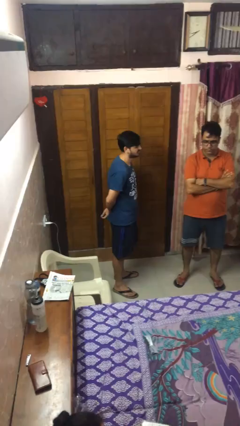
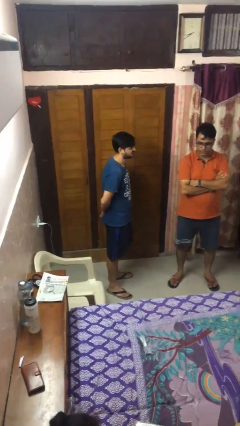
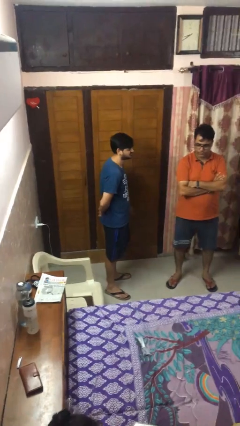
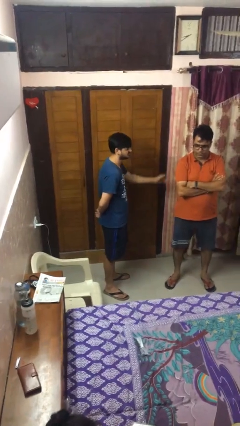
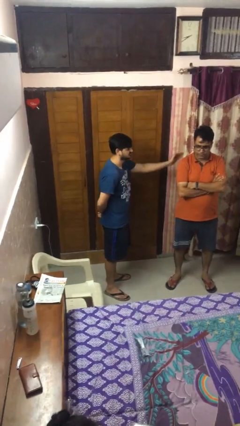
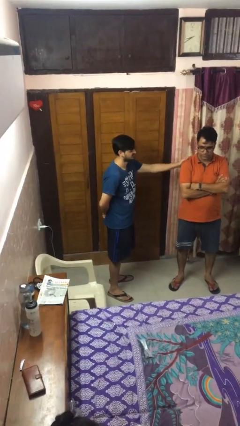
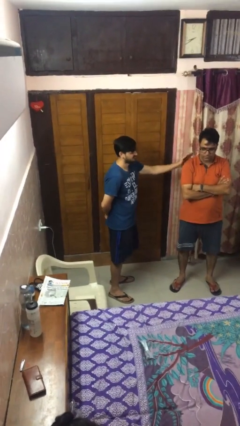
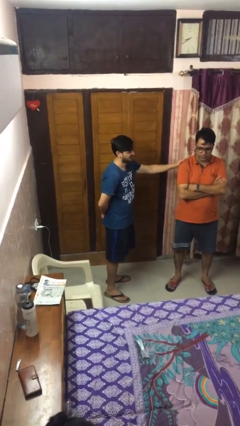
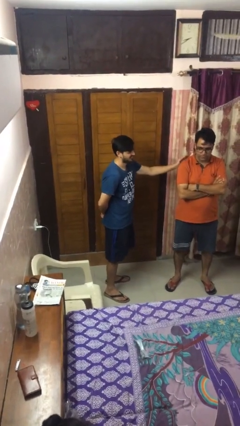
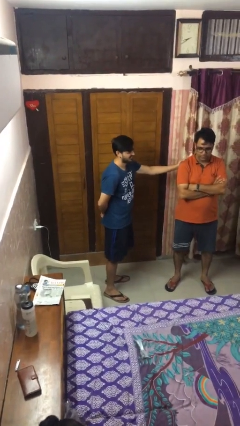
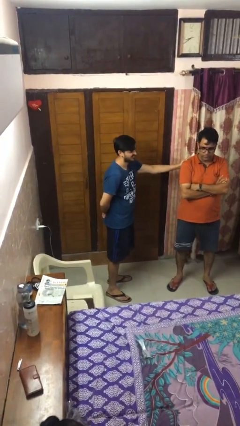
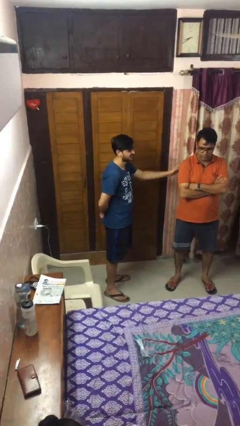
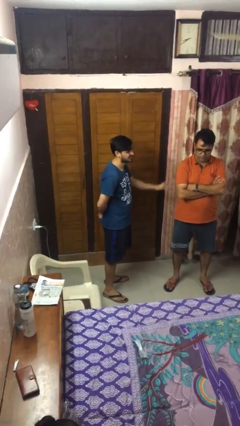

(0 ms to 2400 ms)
person pounds shoulders of person

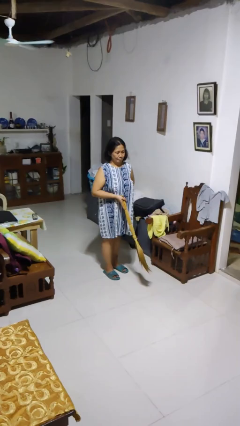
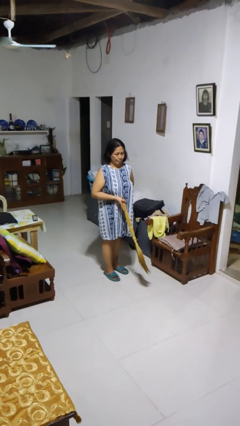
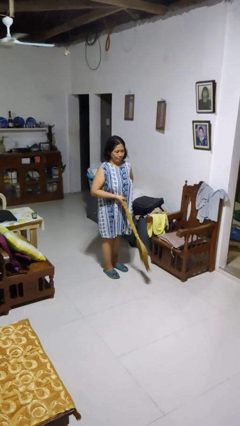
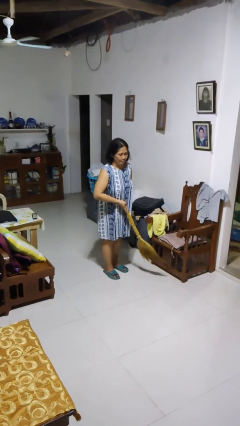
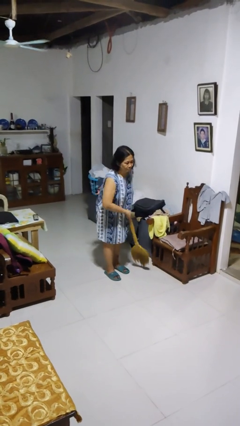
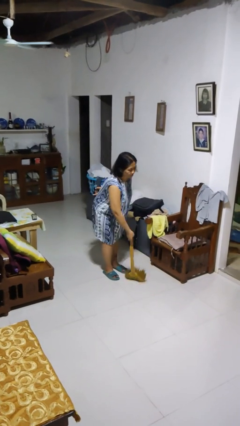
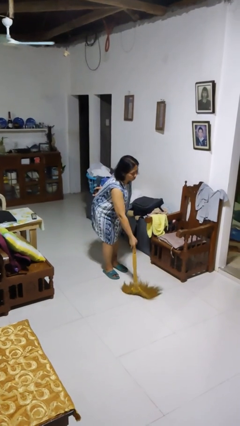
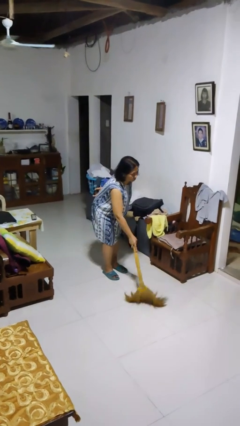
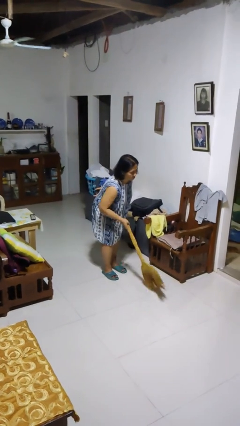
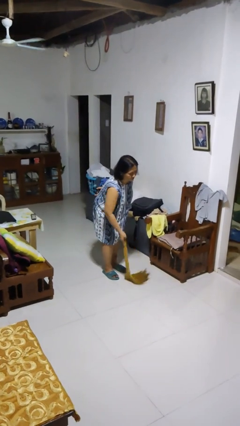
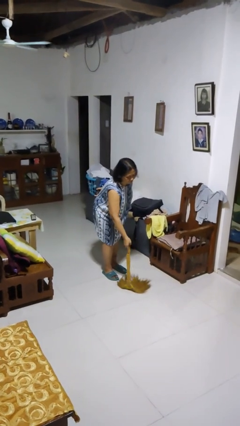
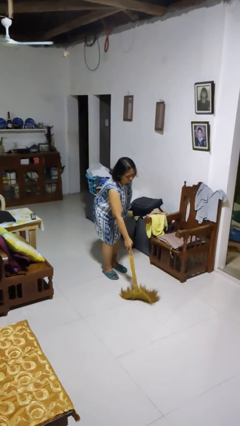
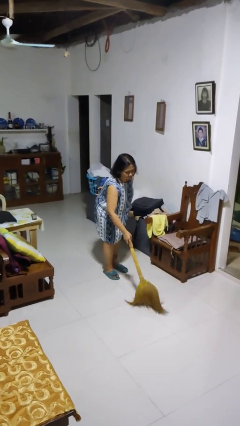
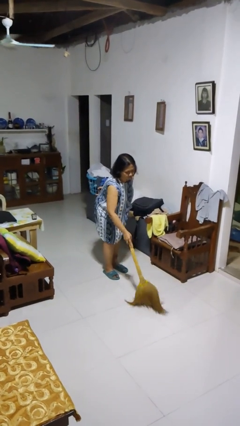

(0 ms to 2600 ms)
person sweeps floor

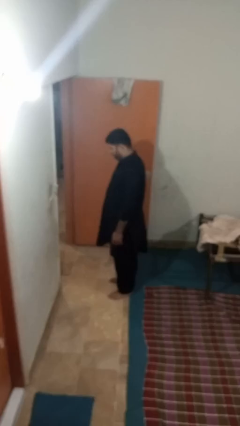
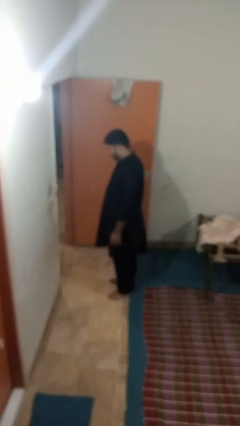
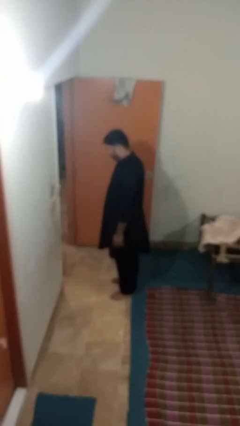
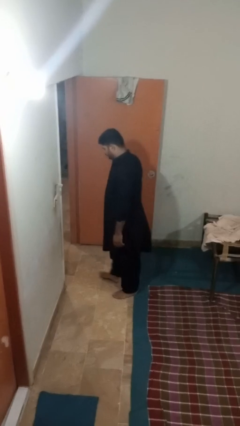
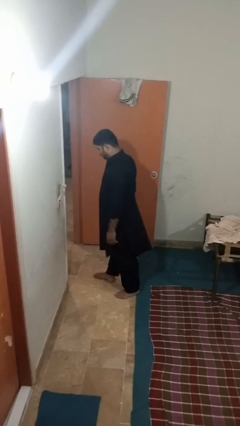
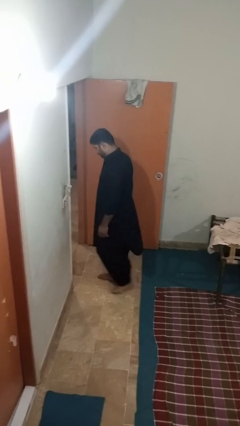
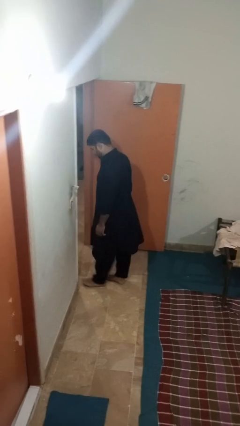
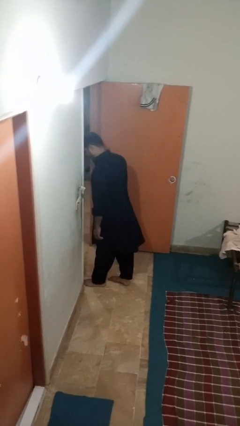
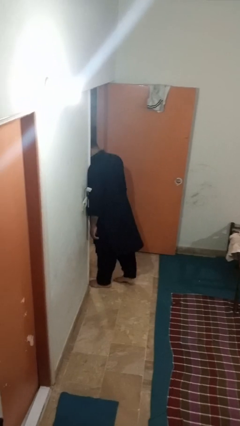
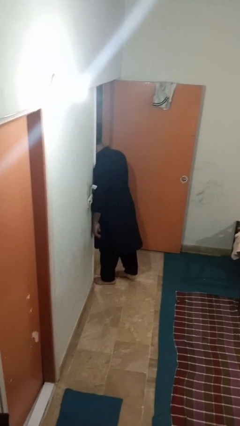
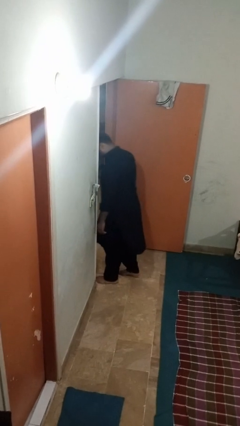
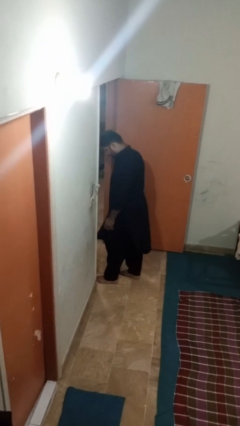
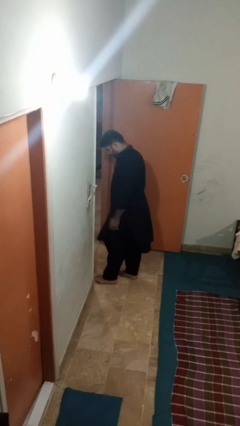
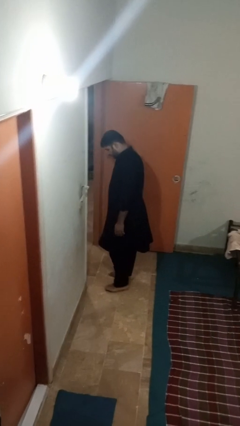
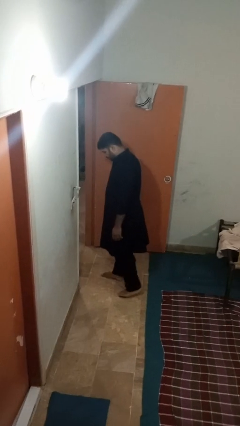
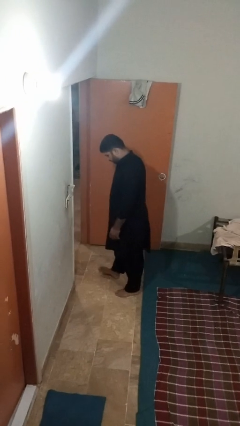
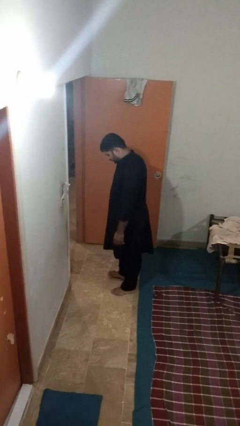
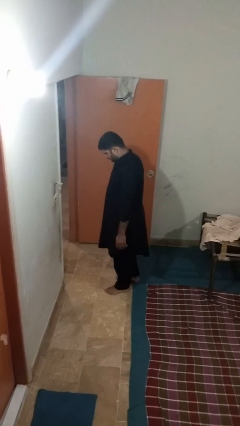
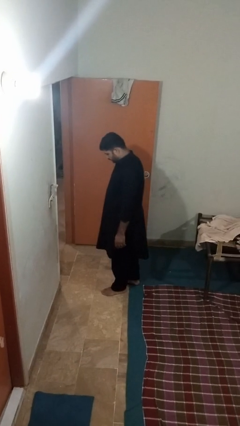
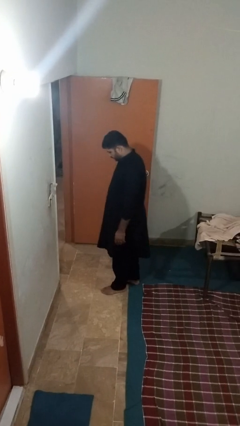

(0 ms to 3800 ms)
person bumps into wall

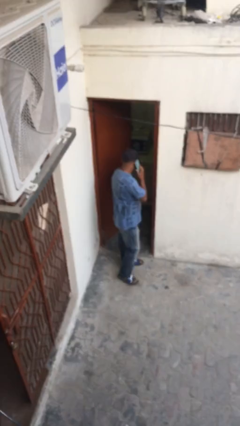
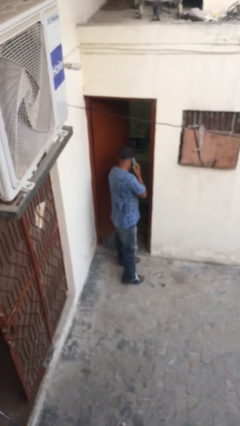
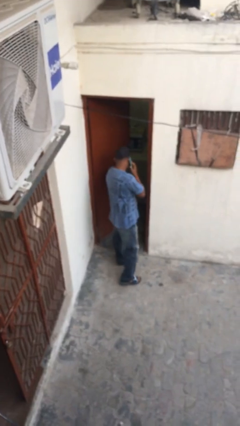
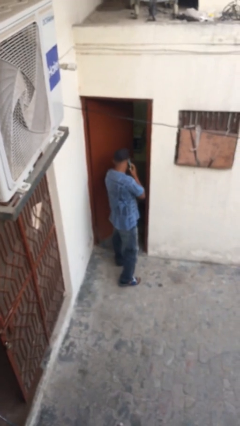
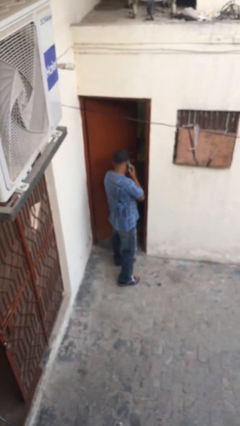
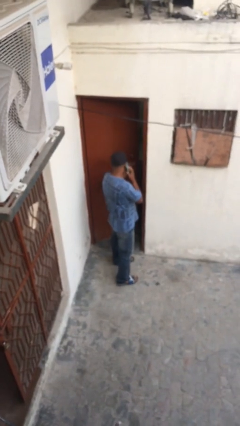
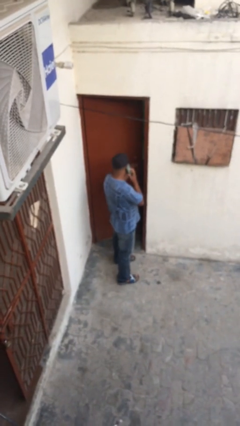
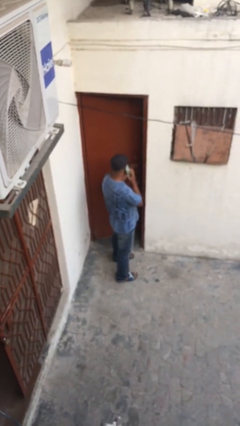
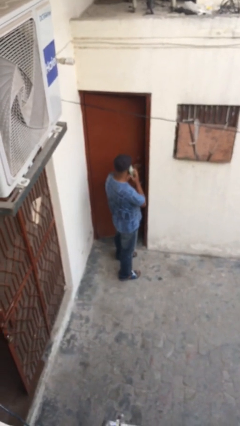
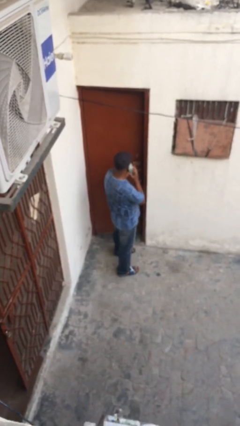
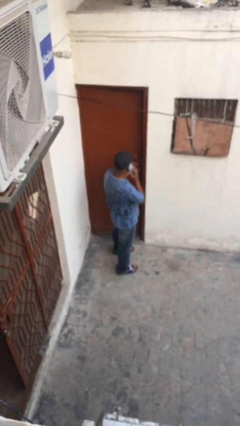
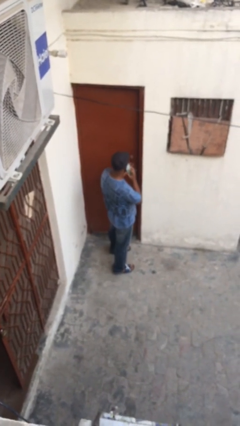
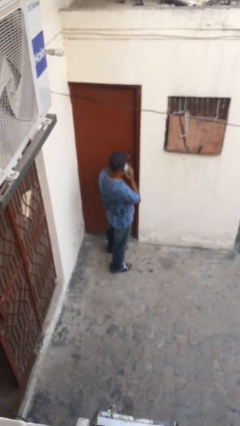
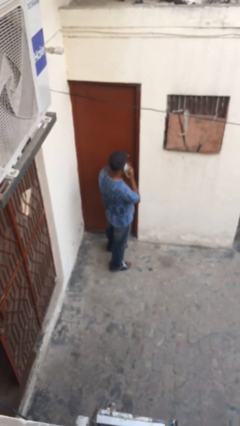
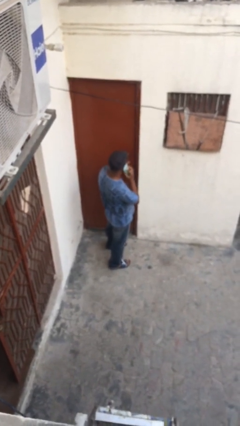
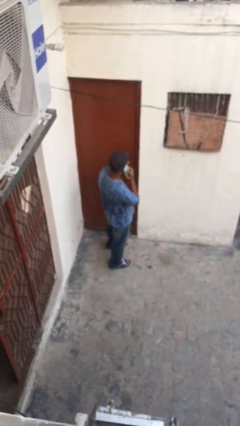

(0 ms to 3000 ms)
person closes facility door

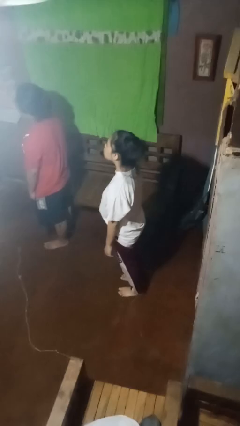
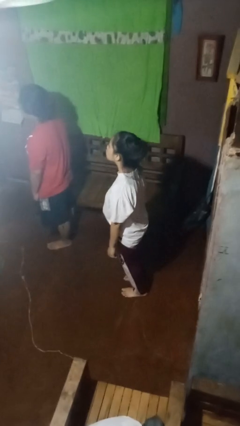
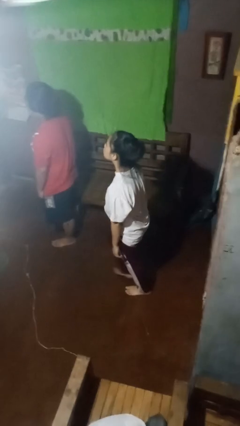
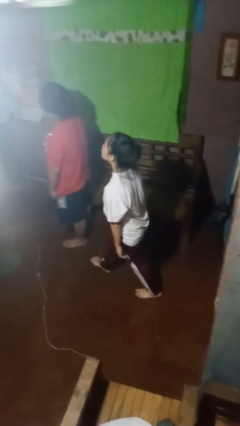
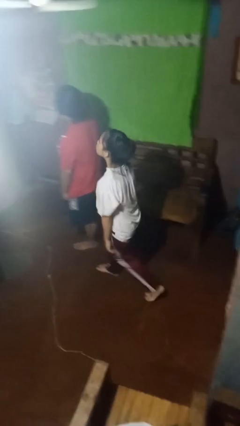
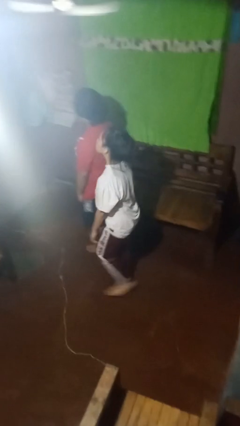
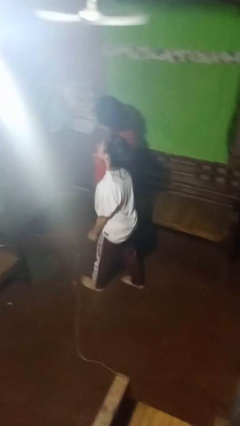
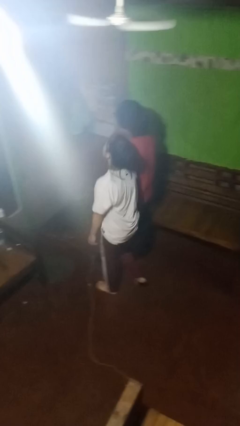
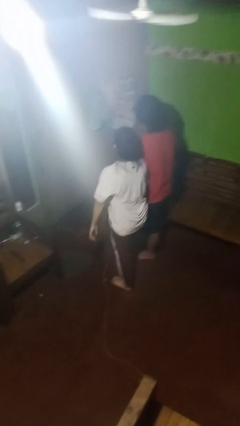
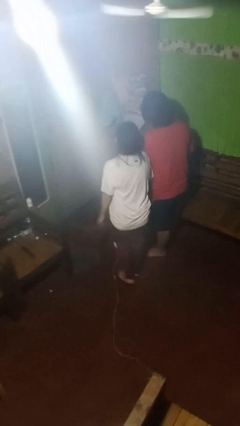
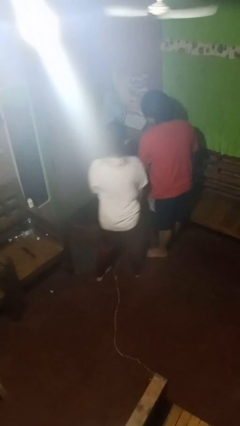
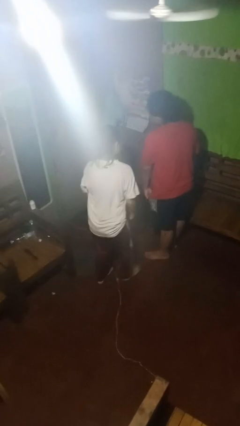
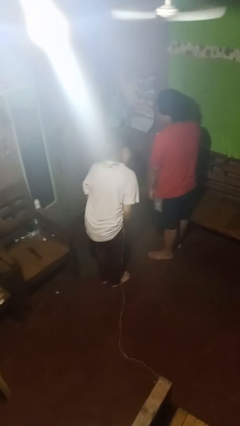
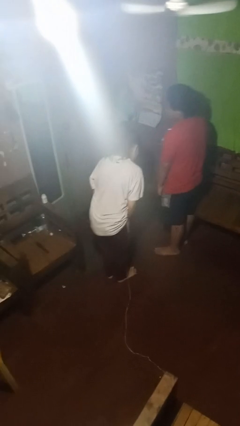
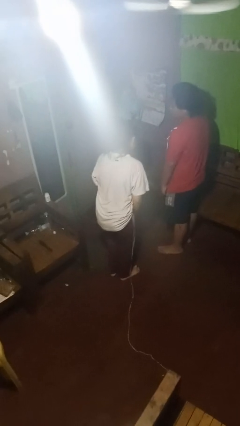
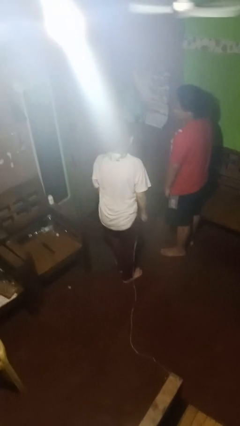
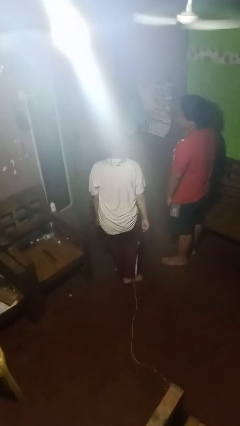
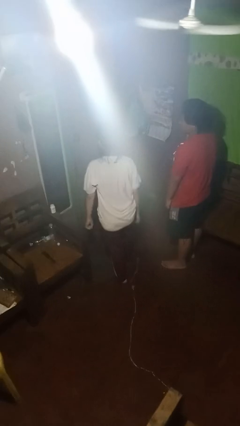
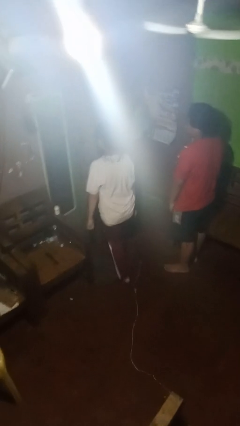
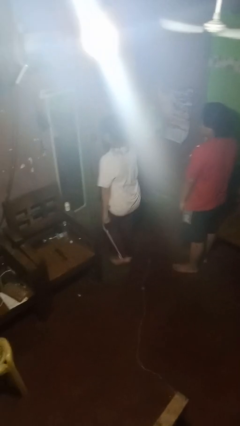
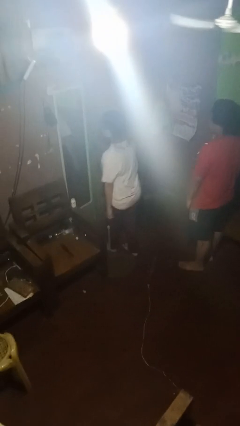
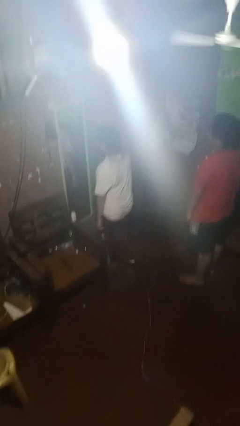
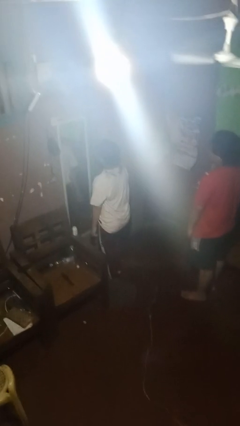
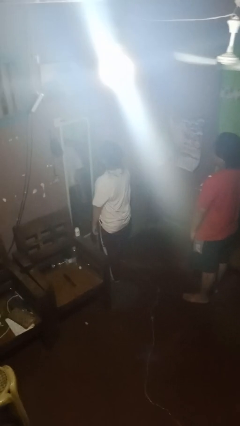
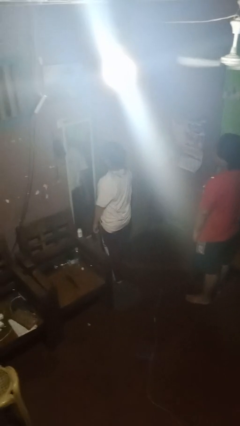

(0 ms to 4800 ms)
person bumps into person

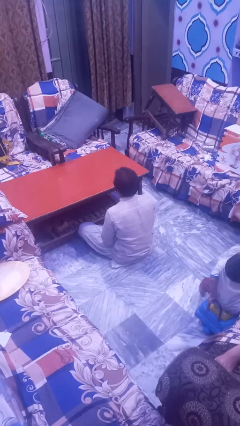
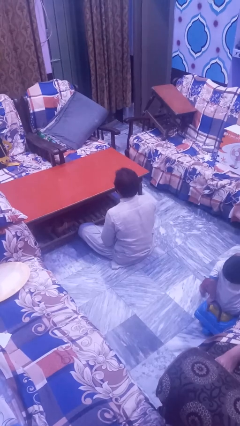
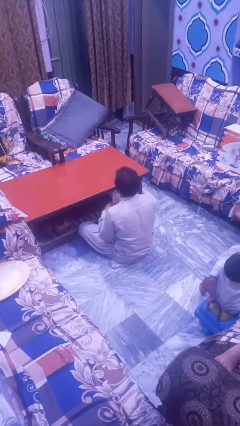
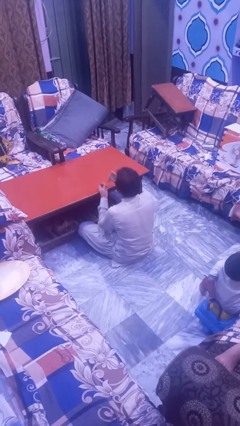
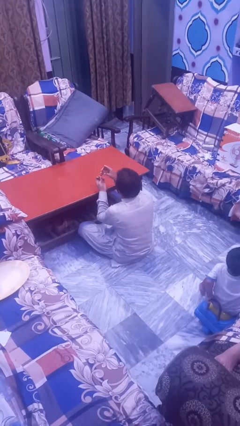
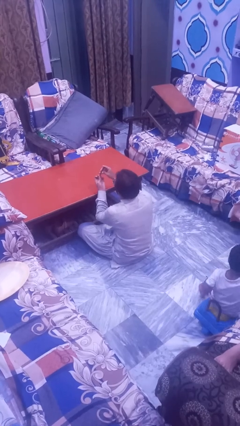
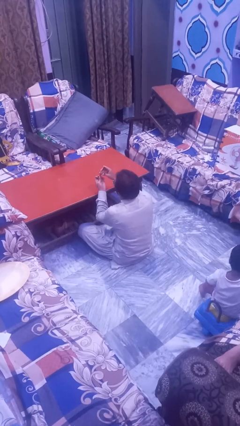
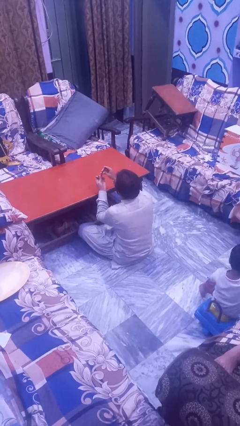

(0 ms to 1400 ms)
person clips fingernails
